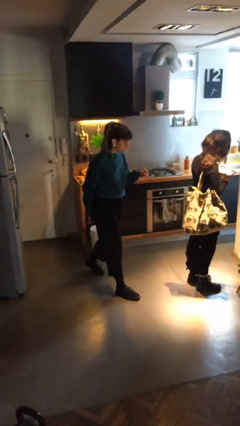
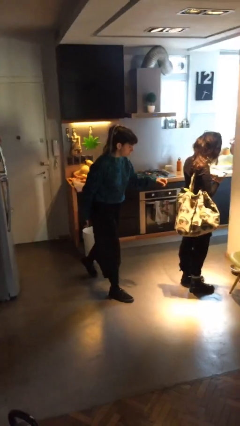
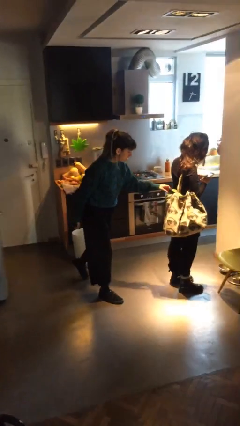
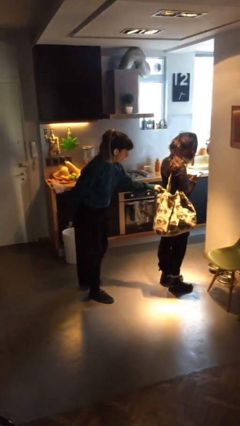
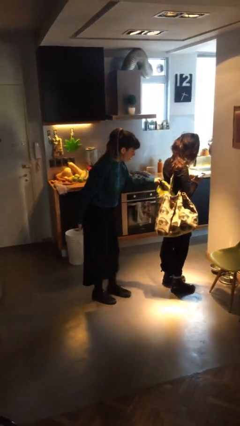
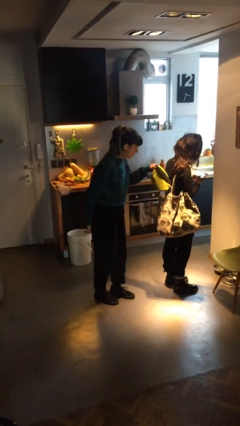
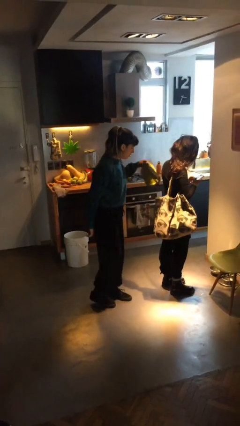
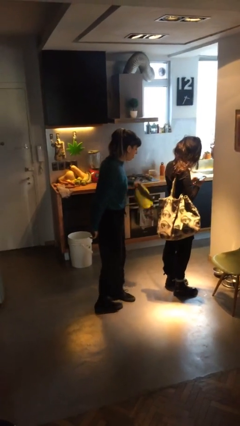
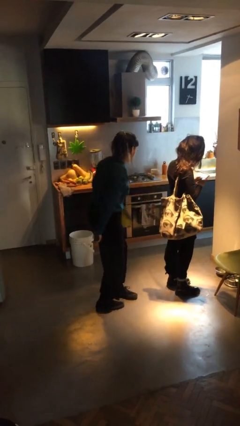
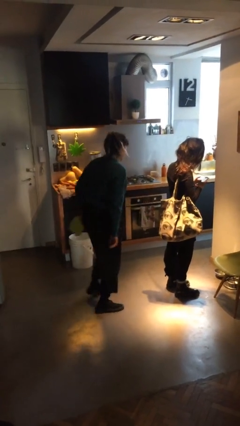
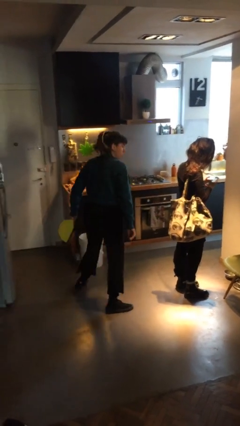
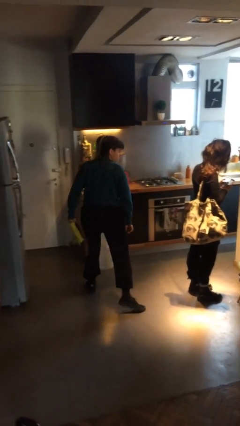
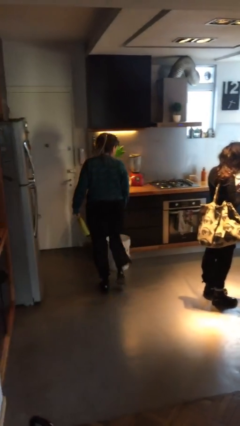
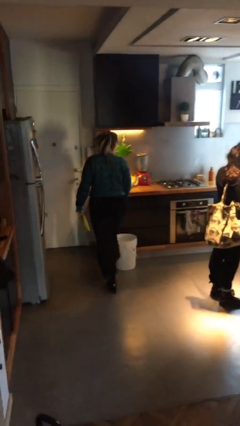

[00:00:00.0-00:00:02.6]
person steals object from person

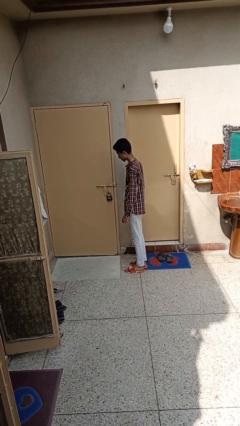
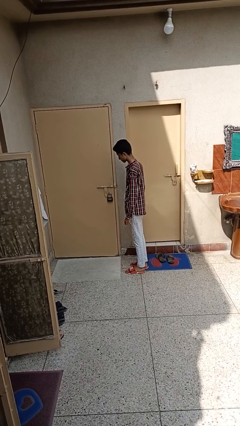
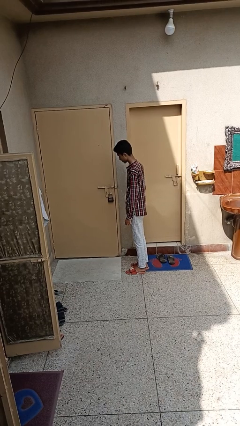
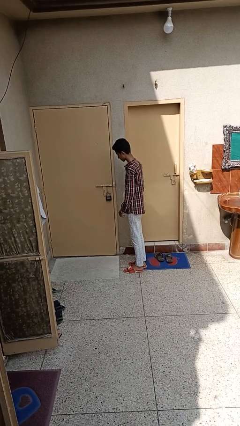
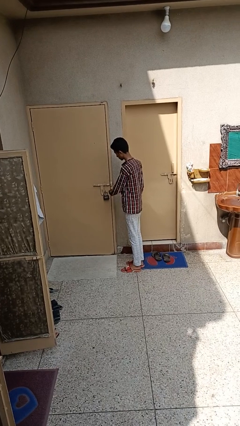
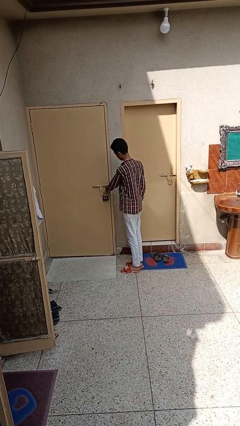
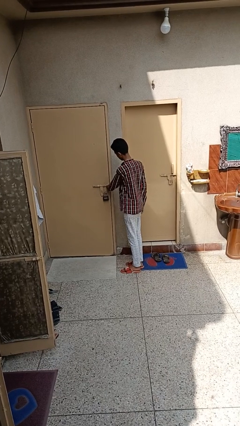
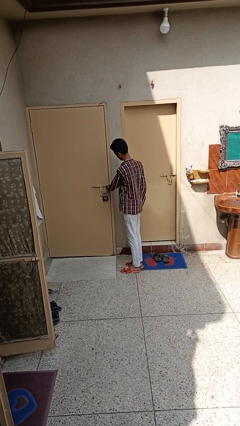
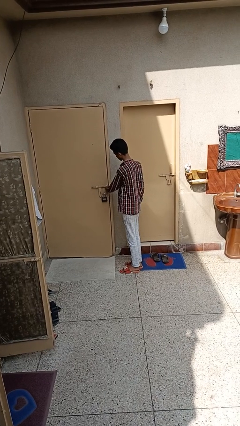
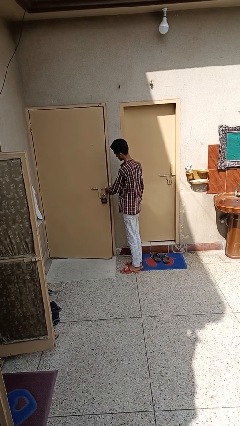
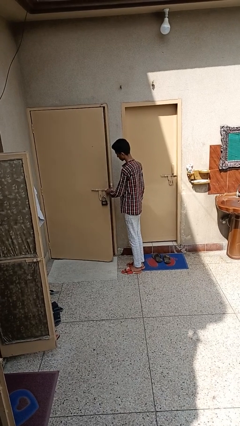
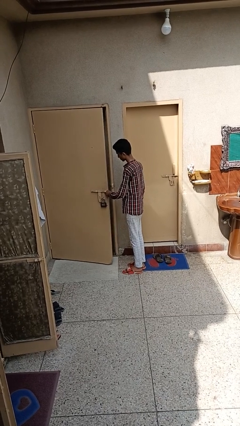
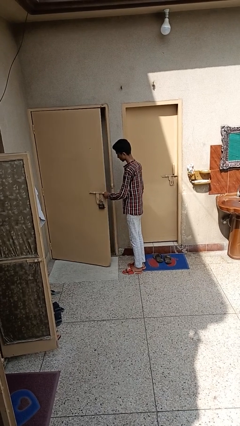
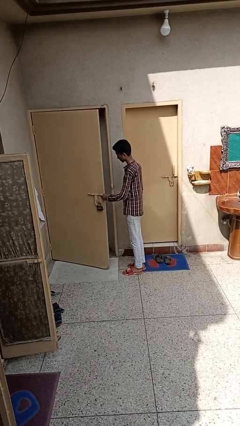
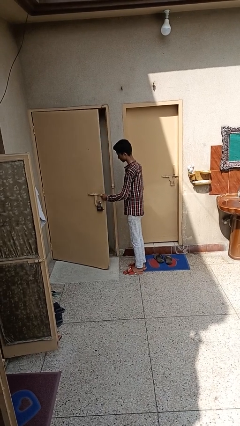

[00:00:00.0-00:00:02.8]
person opens facility door

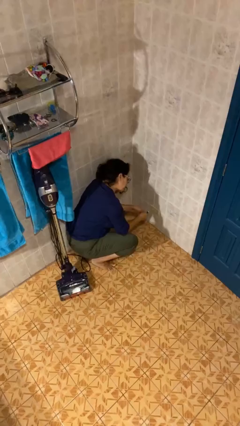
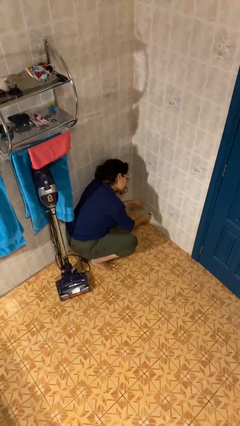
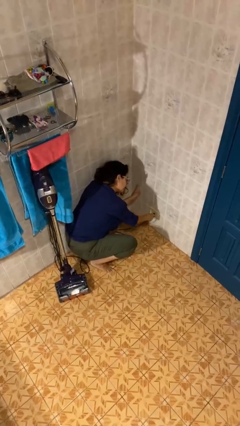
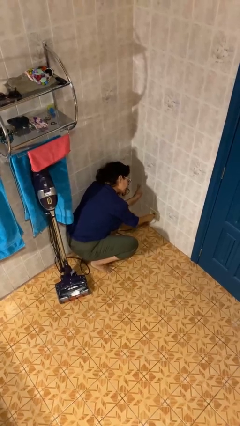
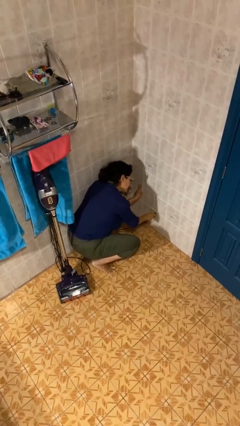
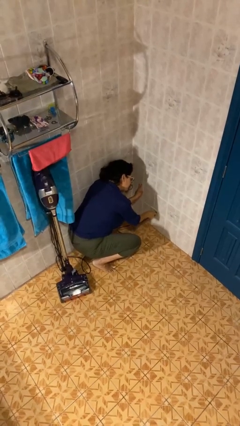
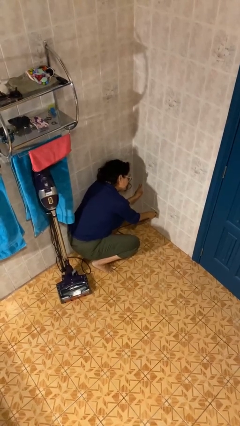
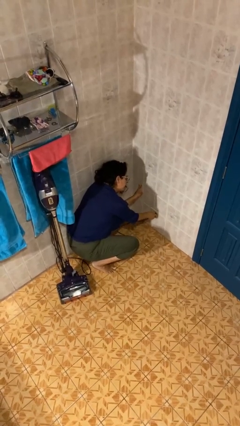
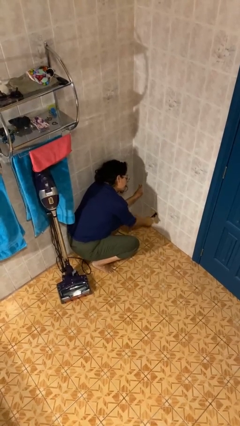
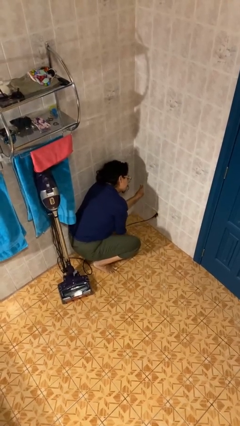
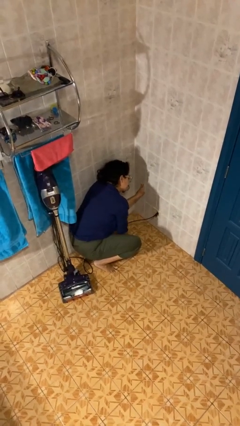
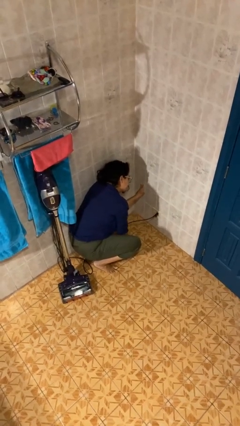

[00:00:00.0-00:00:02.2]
person plugs into electrical socket

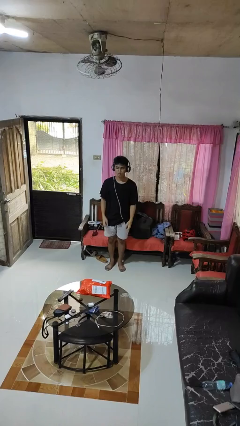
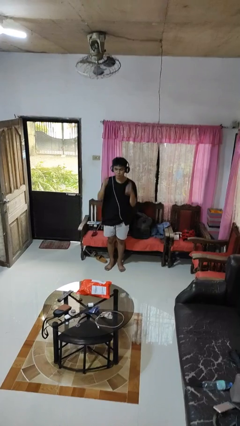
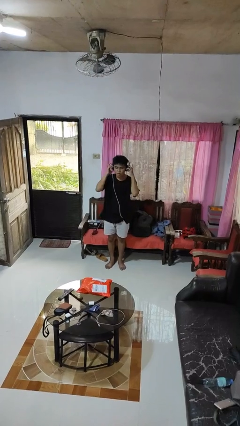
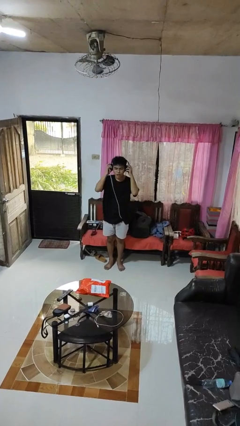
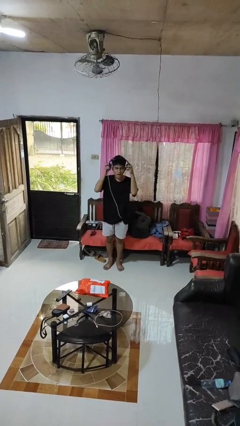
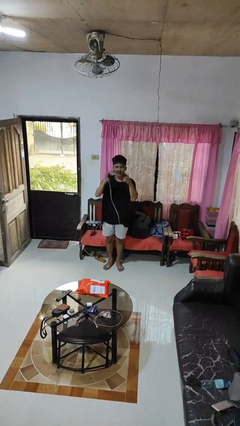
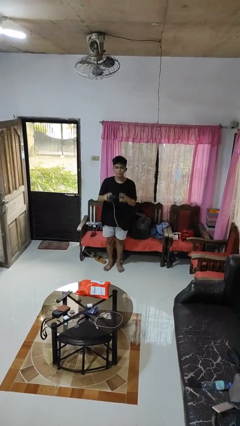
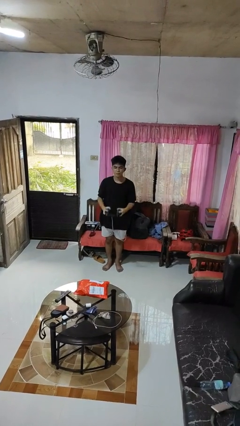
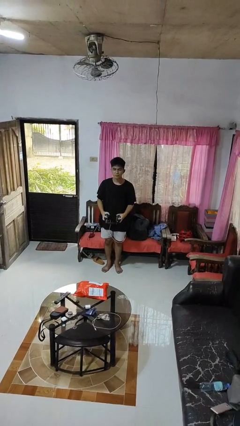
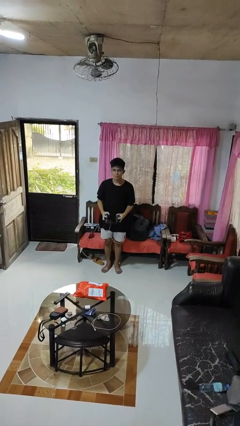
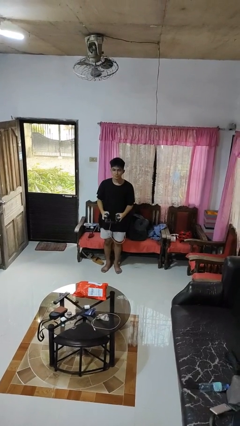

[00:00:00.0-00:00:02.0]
person takes off headphones

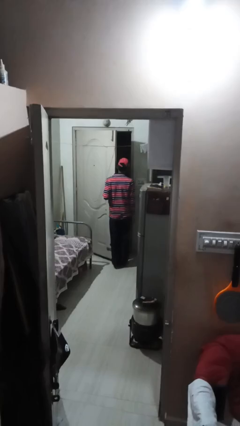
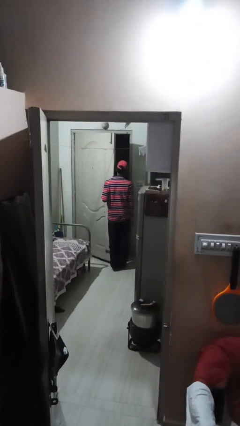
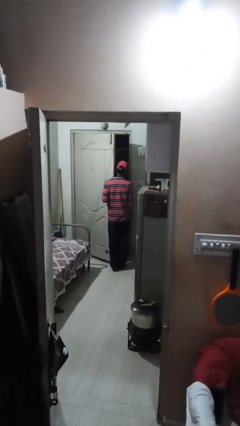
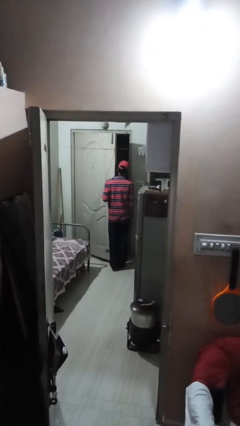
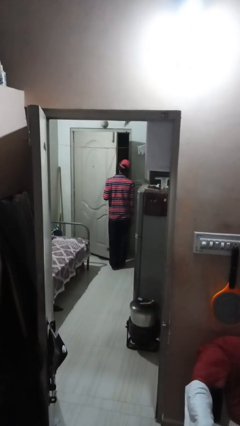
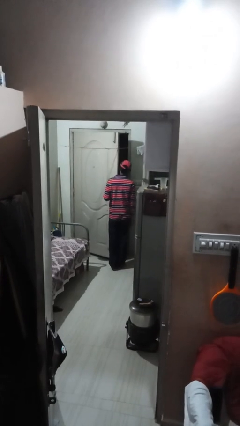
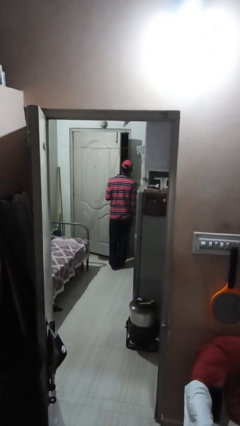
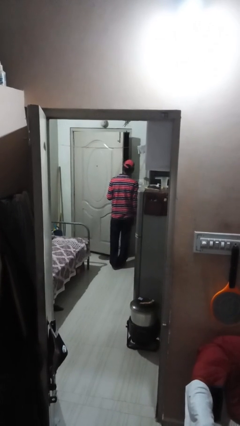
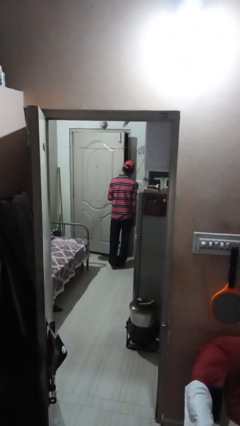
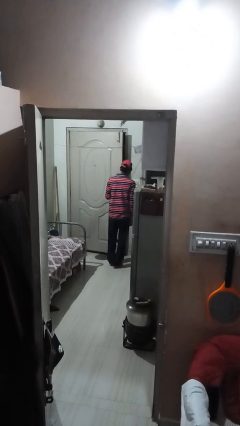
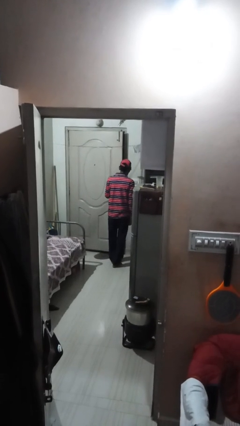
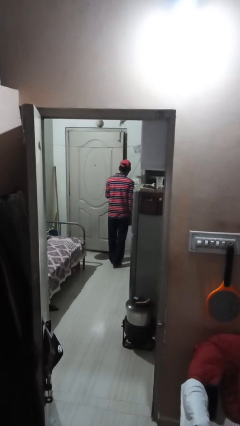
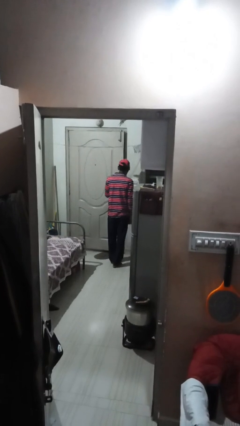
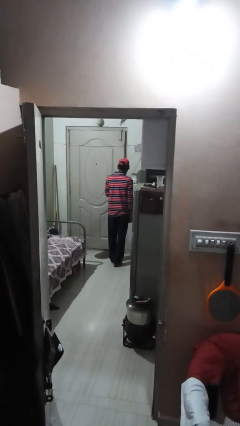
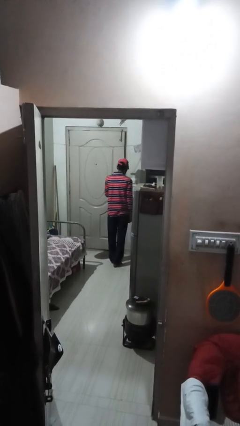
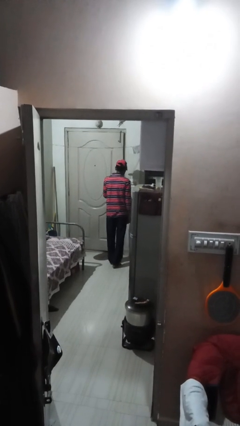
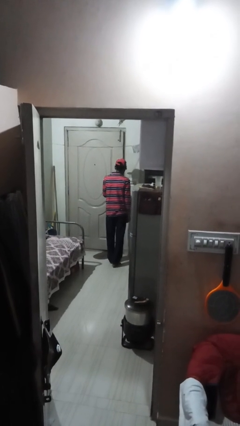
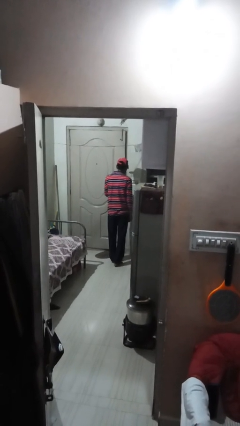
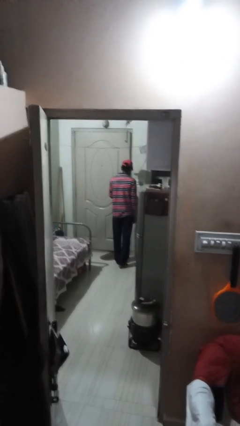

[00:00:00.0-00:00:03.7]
person closes facility door

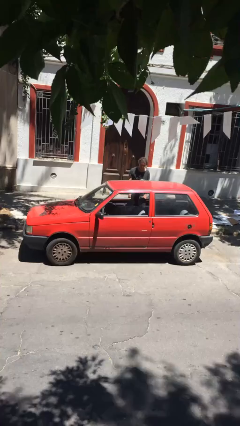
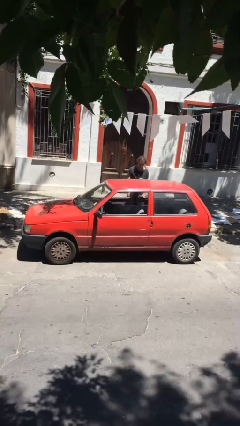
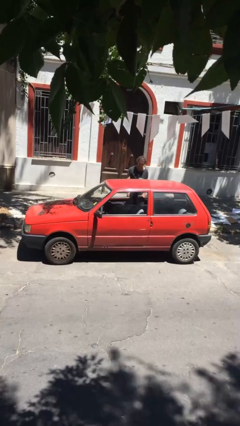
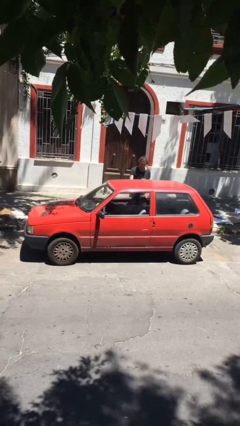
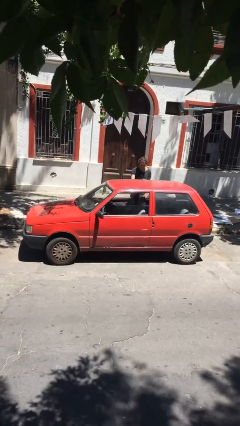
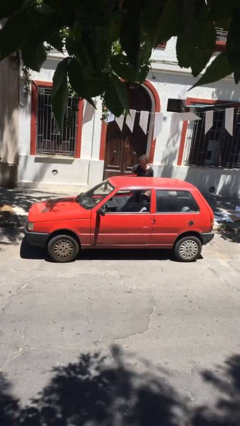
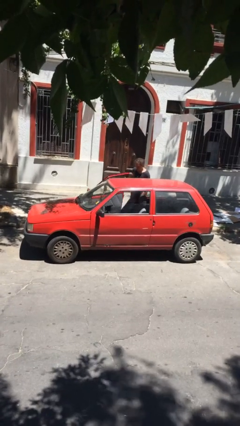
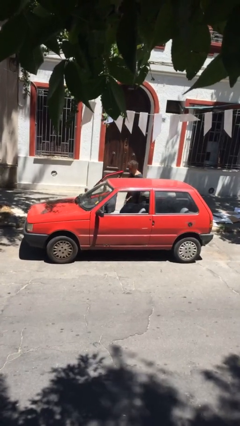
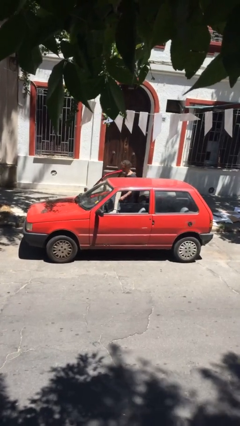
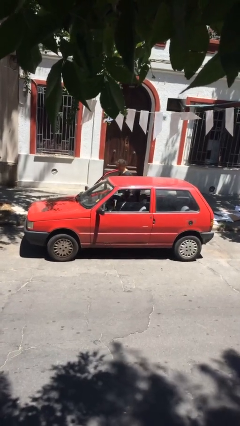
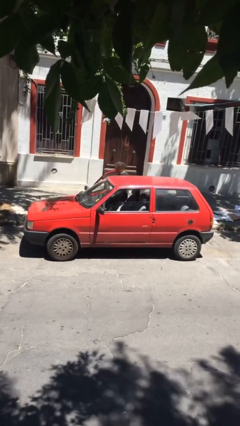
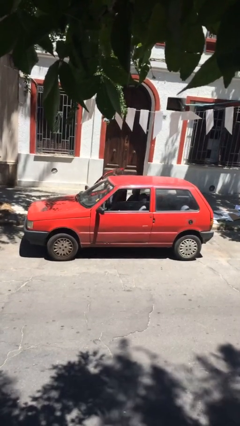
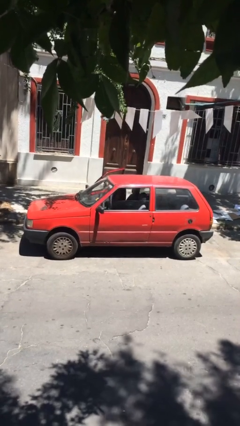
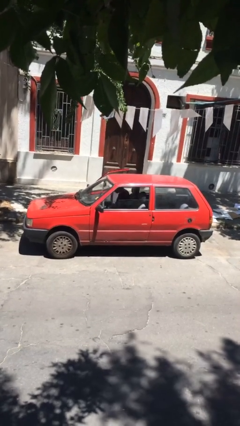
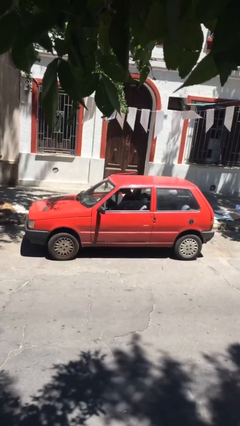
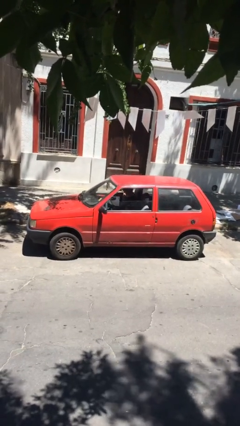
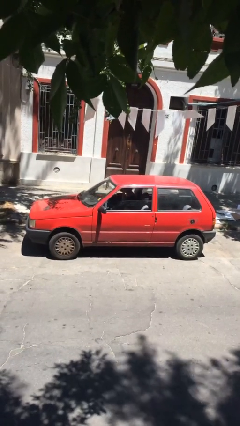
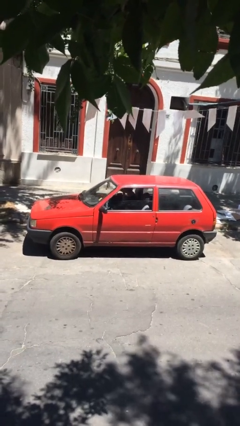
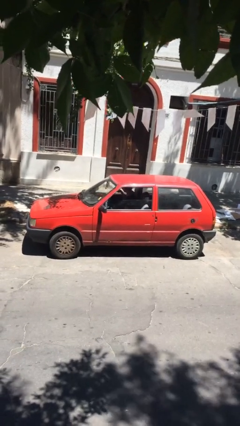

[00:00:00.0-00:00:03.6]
car picks up person

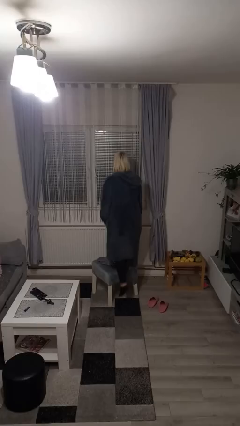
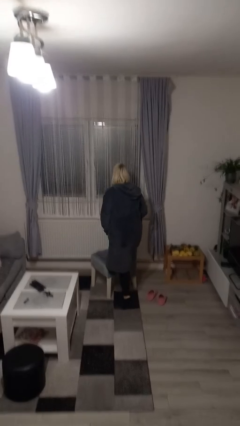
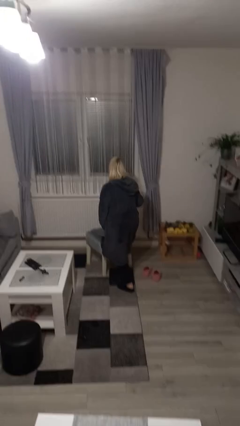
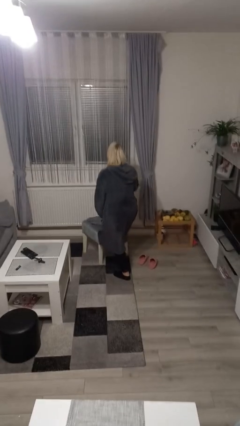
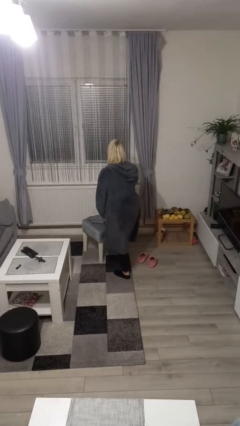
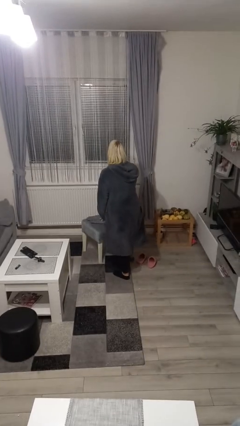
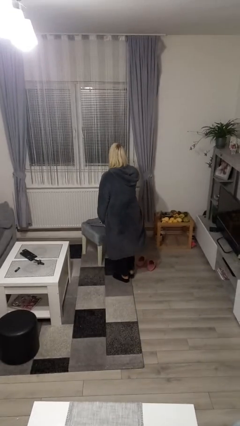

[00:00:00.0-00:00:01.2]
person climbs off chair
